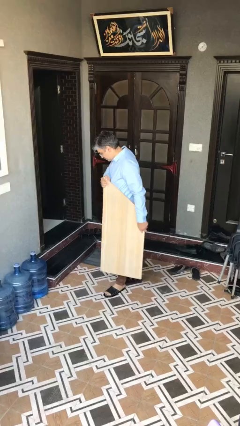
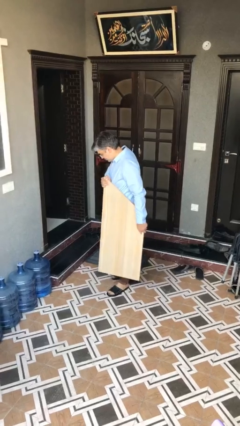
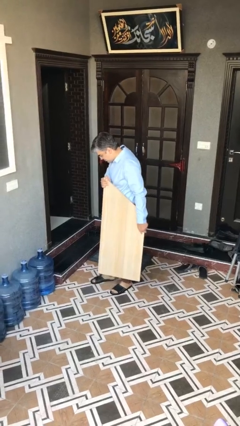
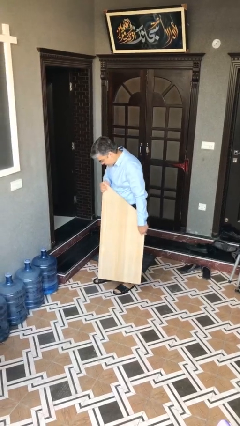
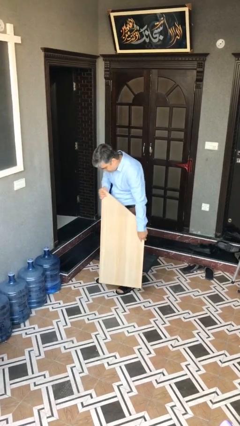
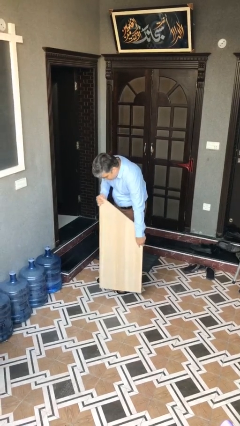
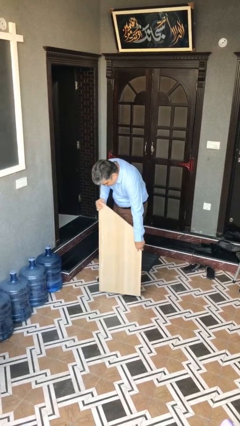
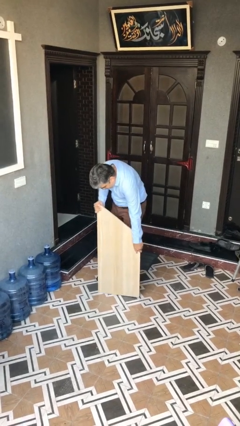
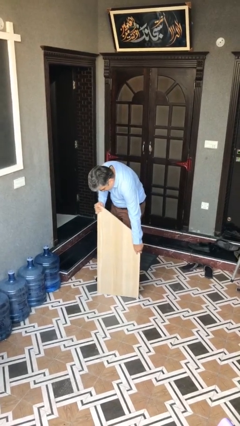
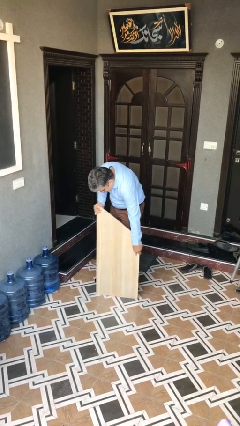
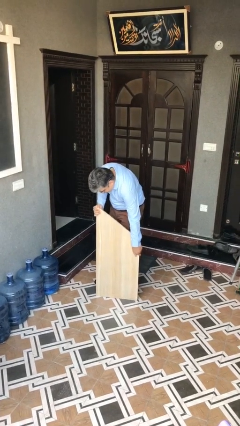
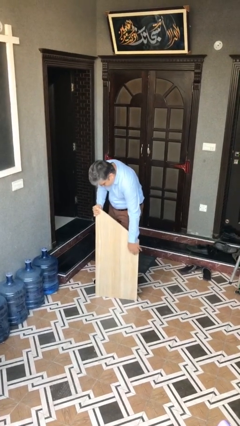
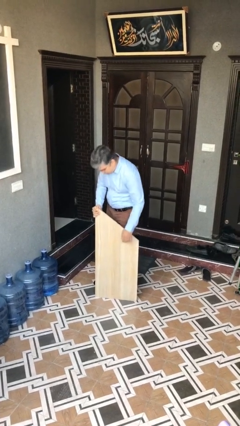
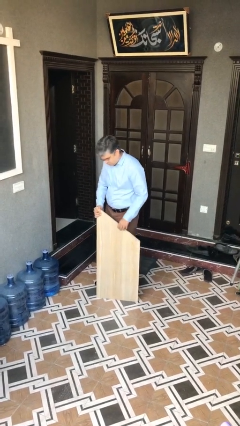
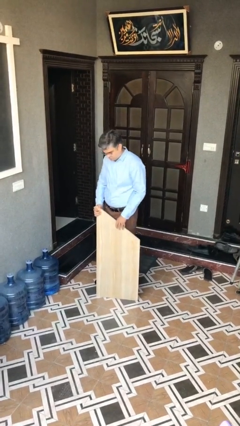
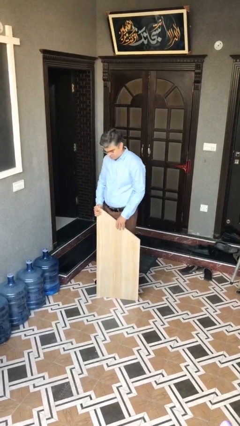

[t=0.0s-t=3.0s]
person puts down object on floor

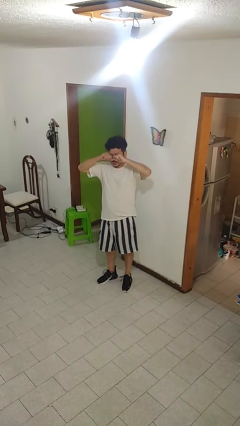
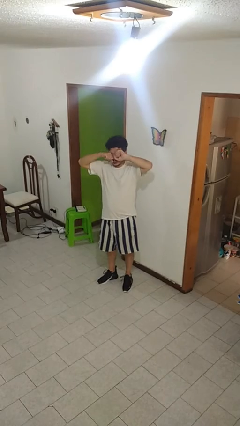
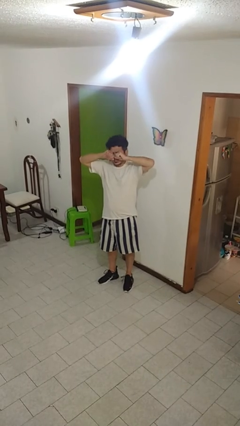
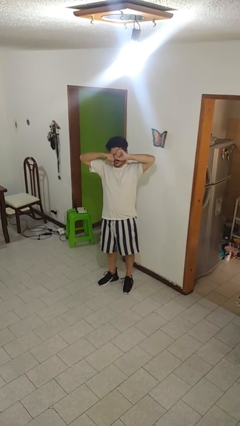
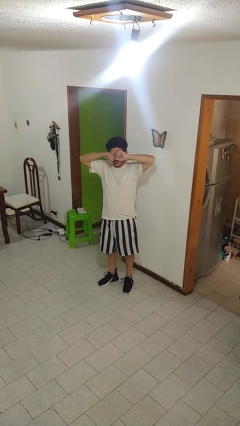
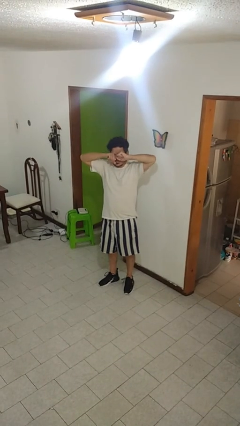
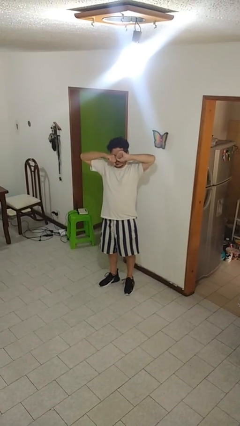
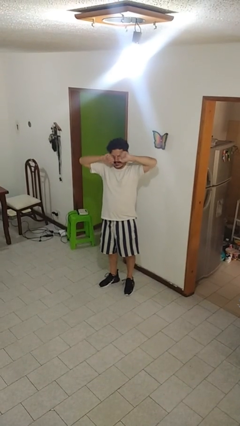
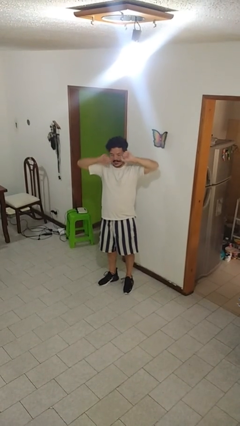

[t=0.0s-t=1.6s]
person rubs eyes

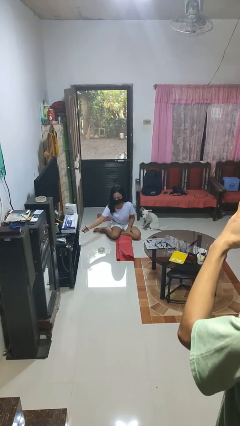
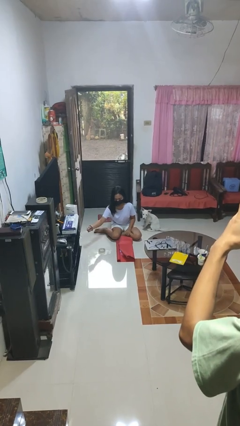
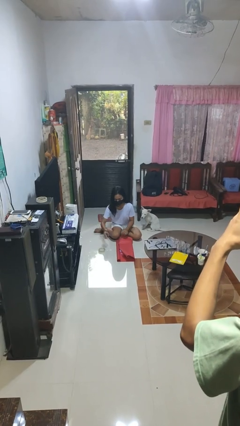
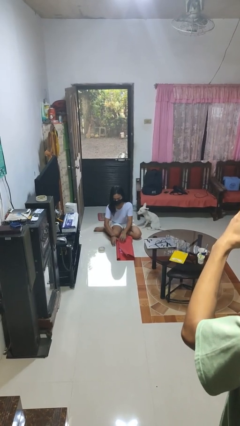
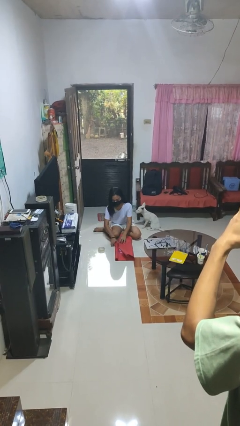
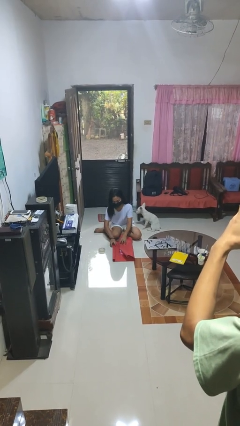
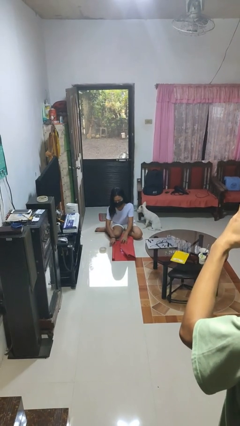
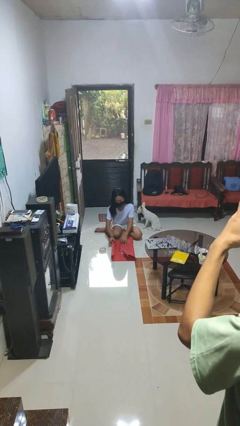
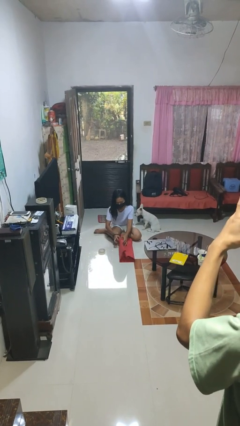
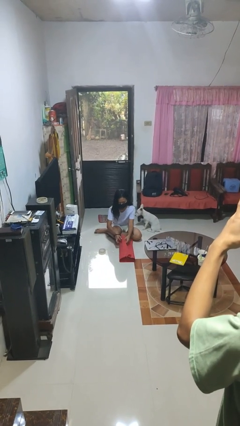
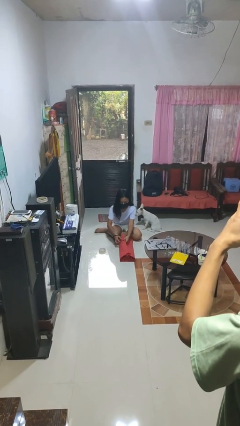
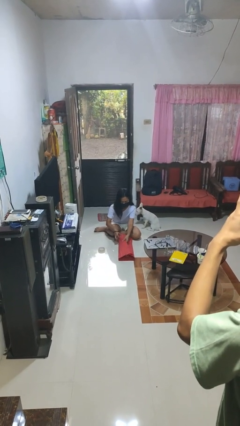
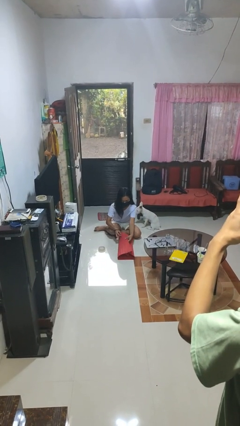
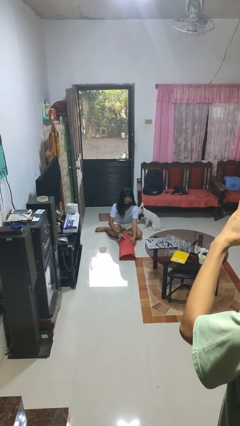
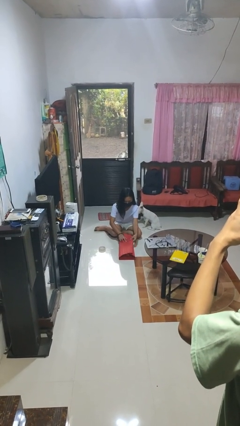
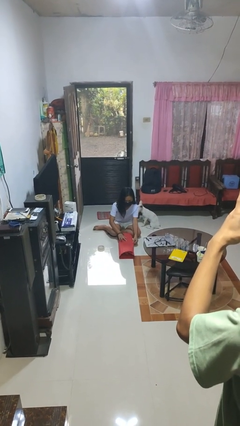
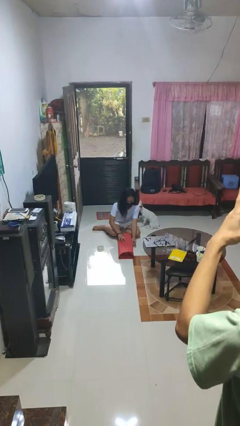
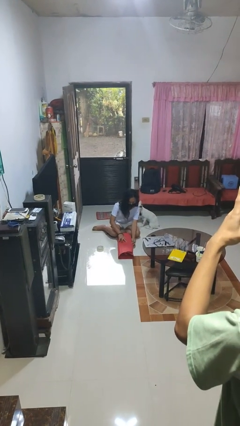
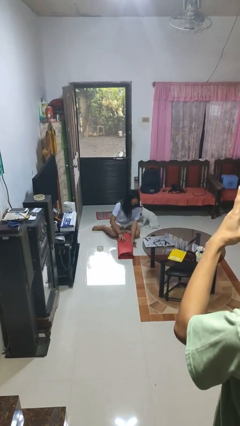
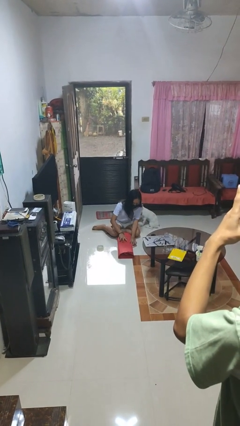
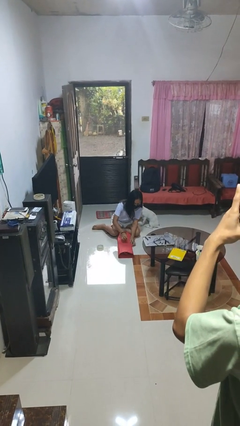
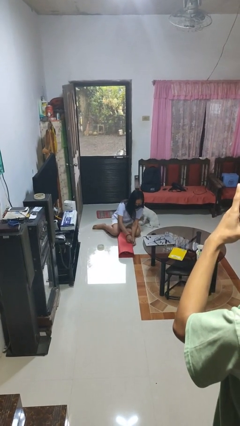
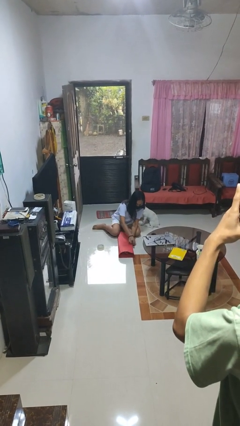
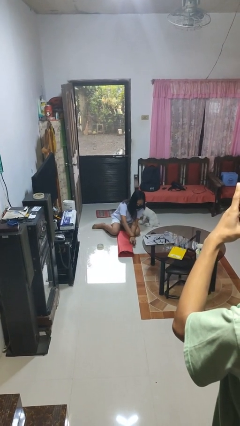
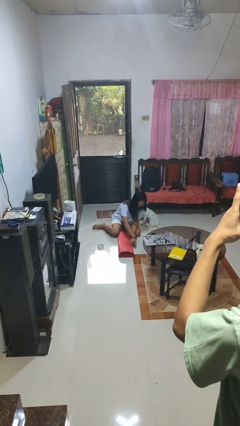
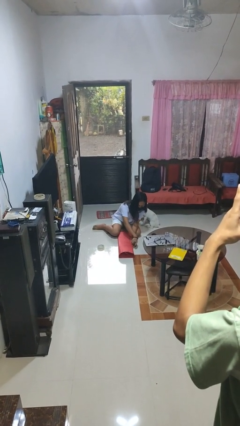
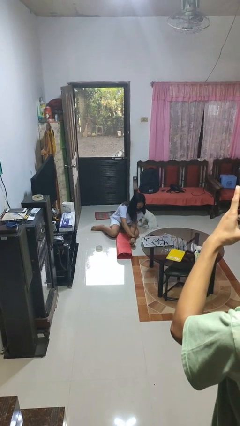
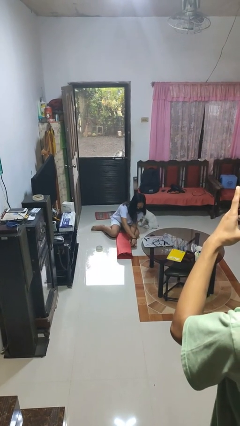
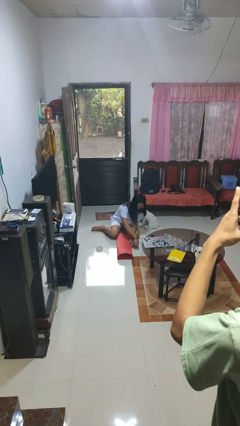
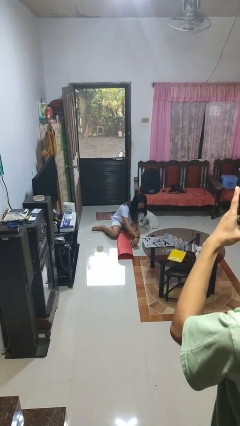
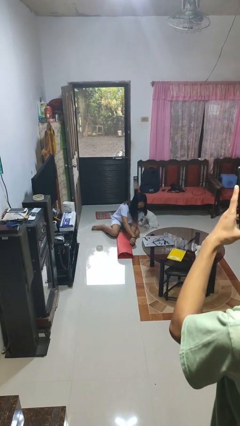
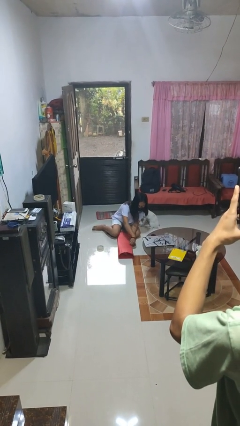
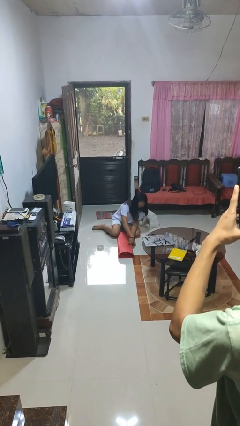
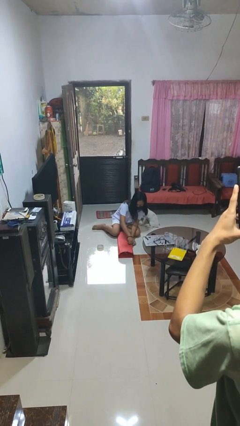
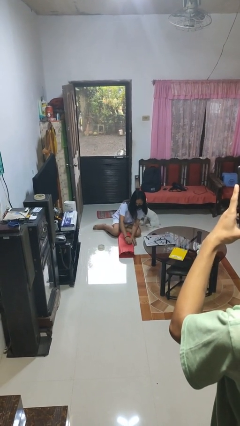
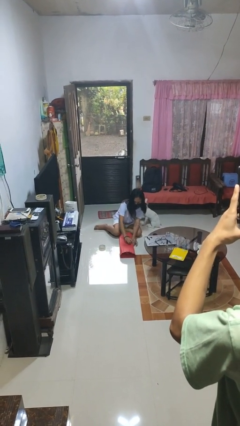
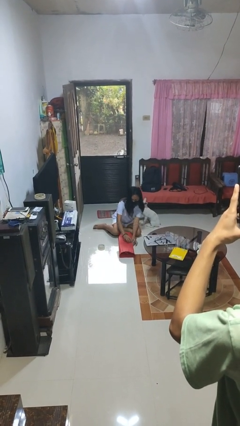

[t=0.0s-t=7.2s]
person wraps box

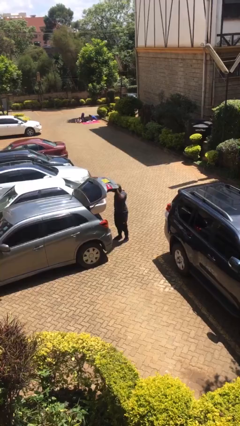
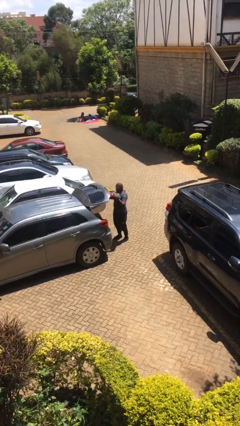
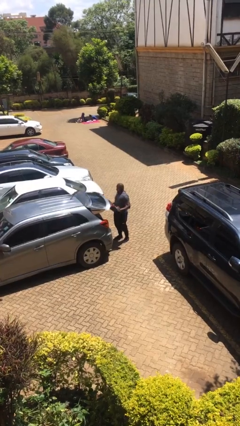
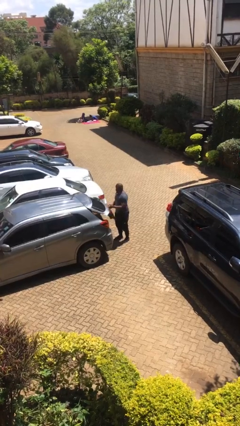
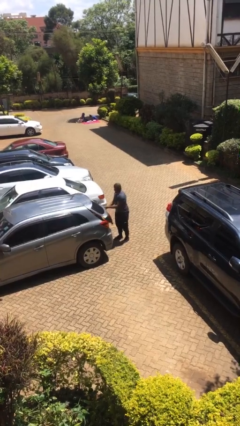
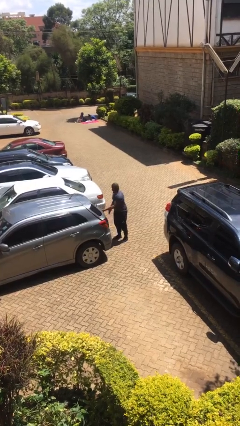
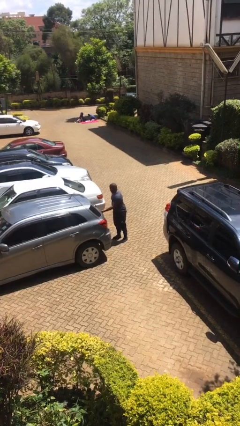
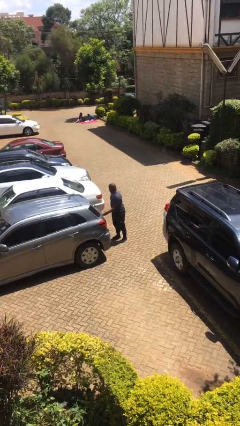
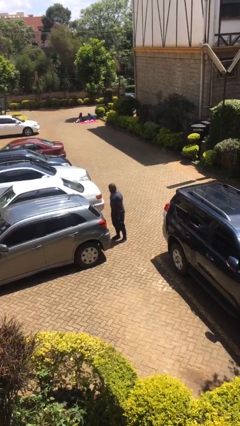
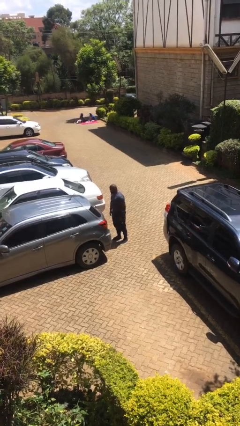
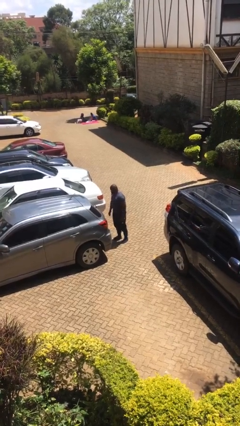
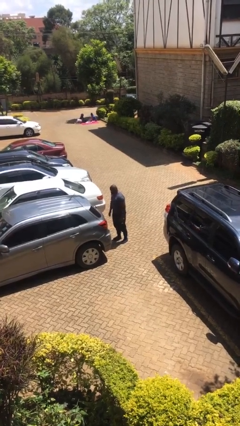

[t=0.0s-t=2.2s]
person closes car trunk

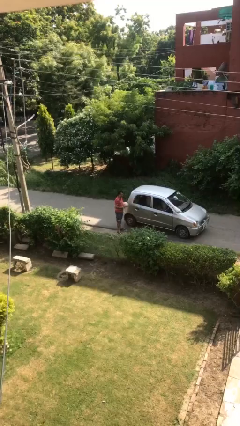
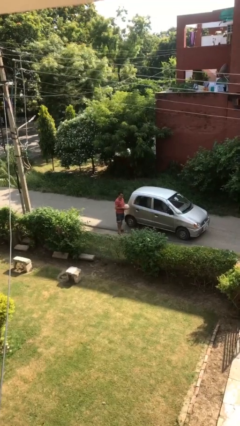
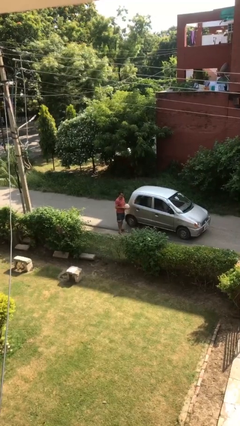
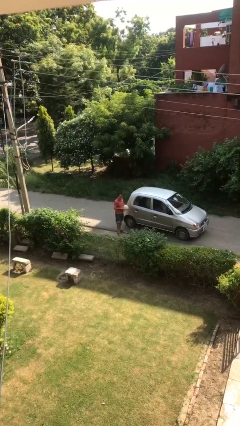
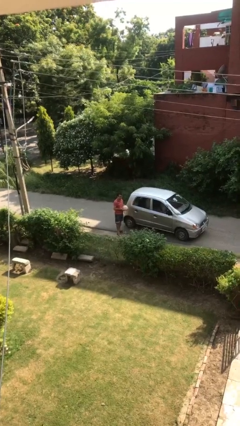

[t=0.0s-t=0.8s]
person closes car door

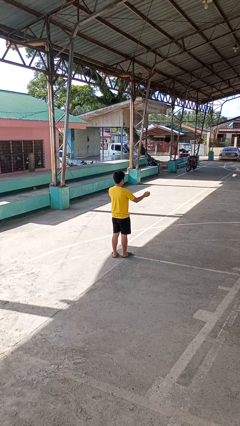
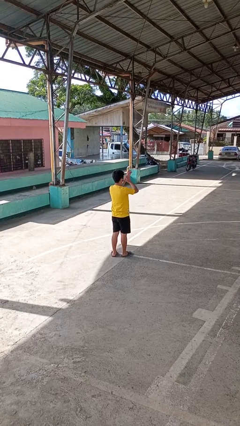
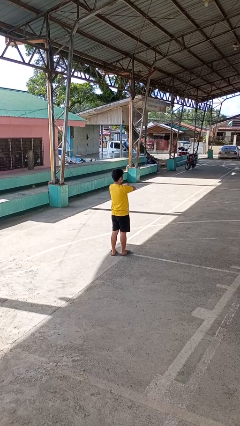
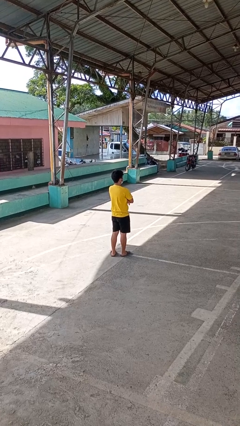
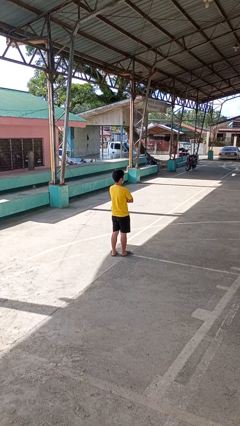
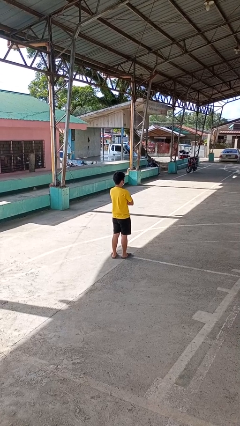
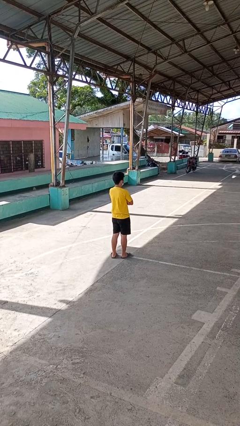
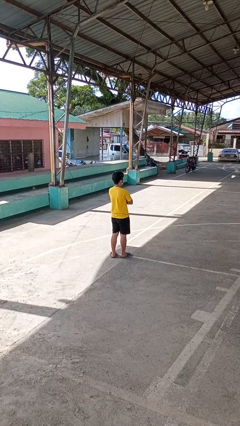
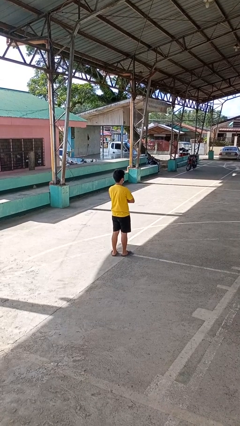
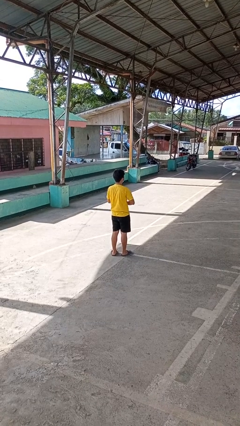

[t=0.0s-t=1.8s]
person crosses arms

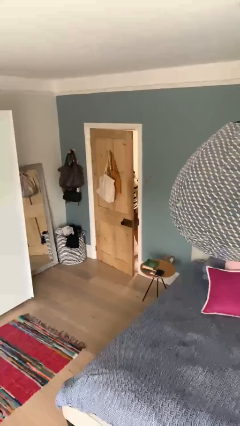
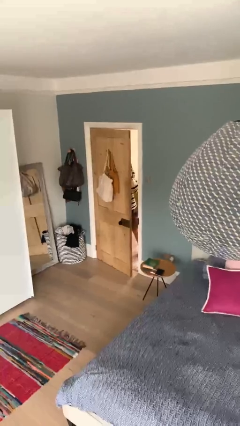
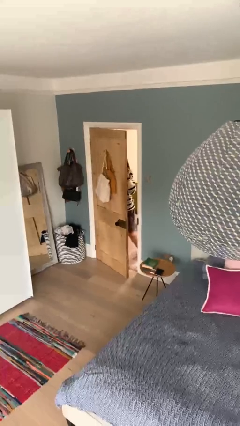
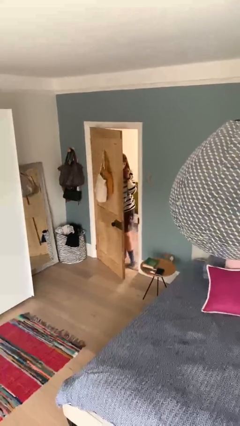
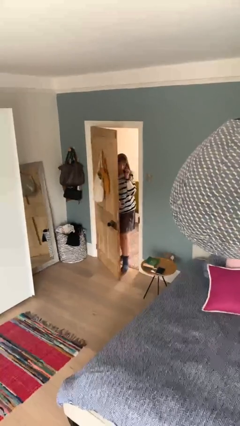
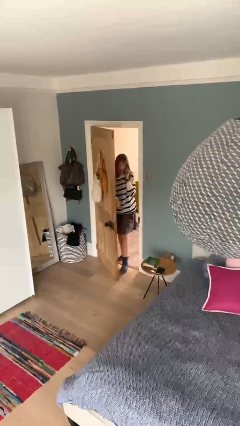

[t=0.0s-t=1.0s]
person opens facility door
